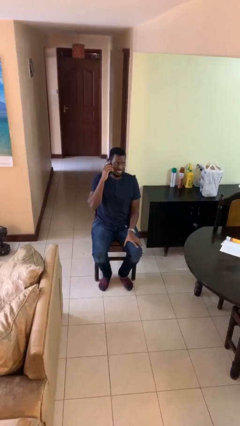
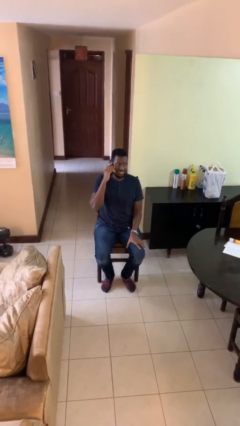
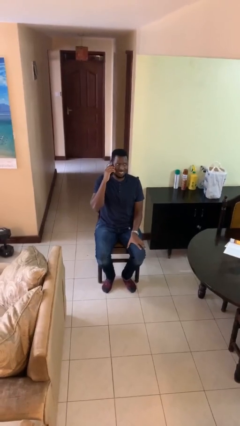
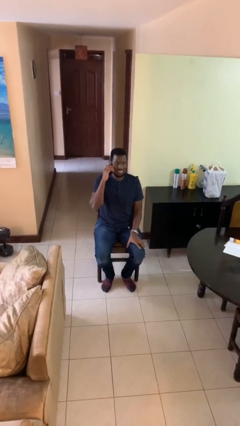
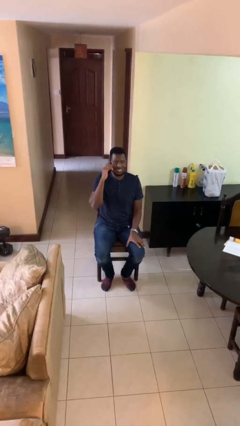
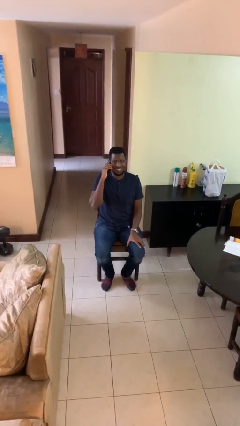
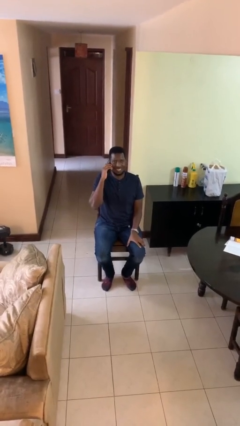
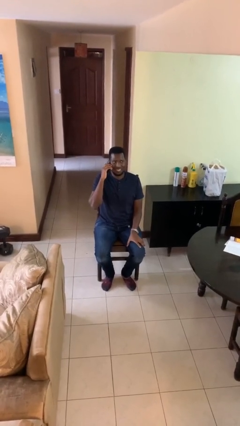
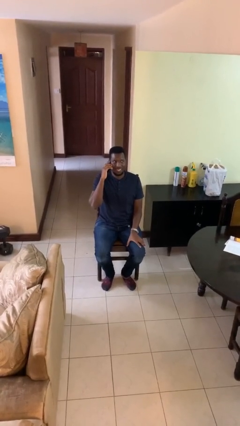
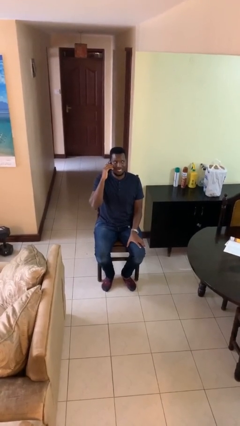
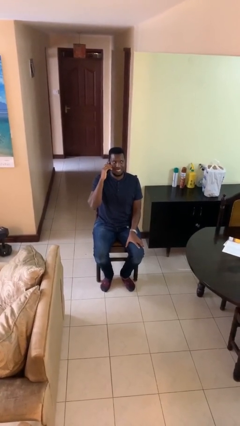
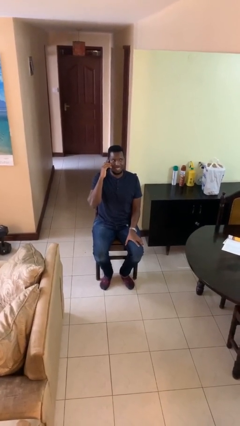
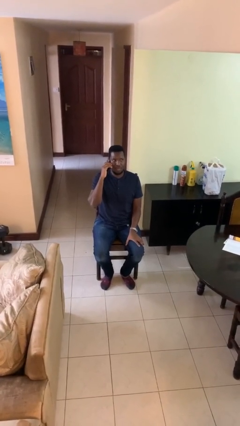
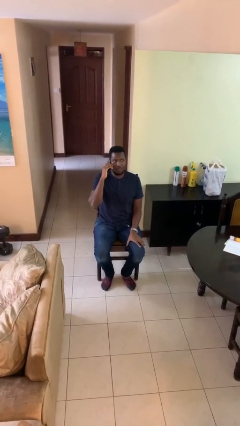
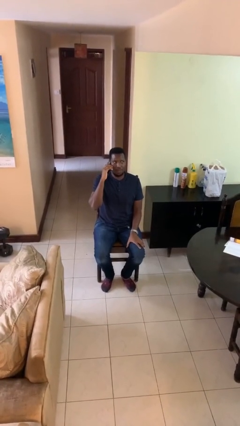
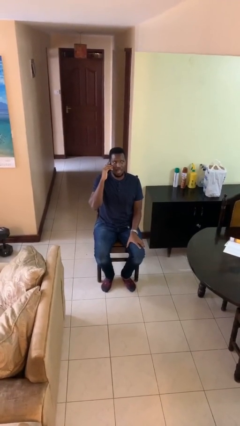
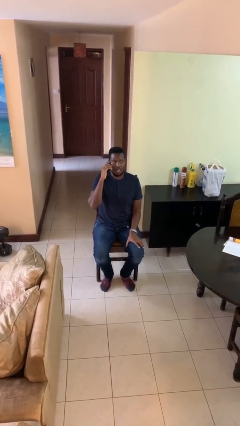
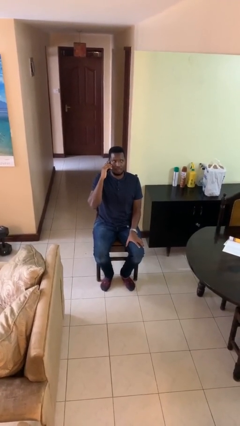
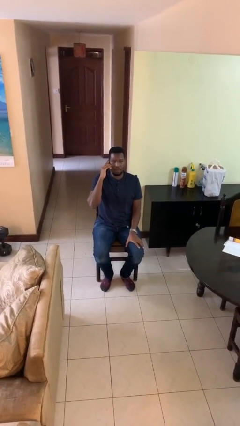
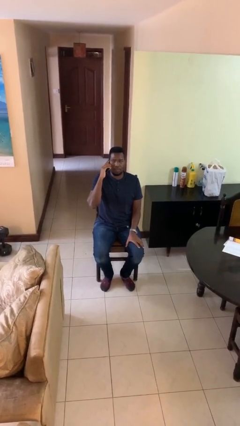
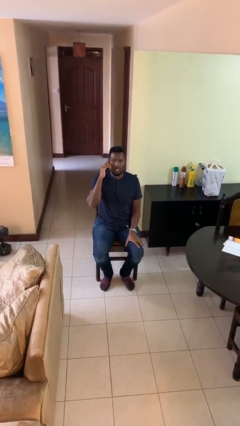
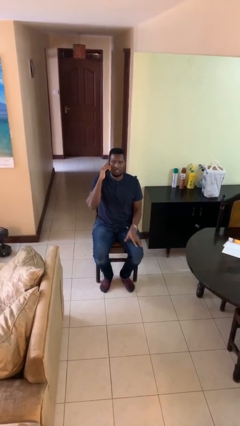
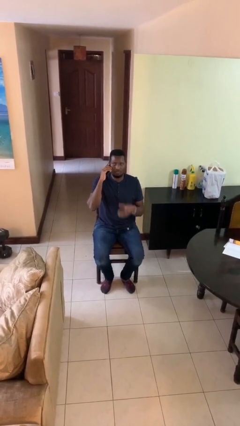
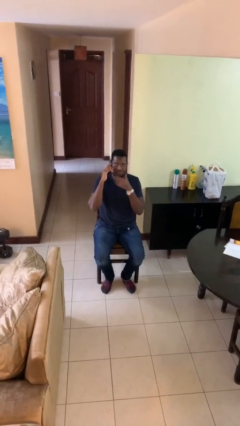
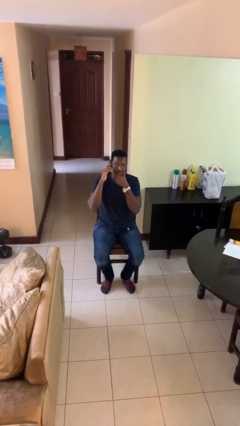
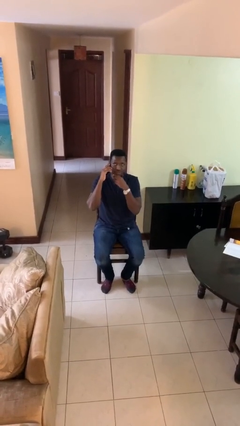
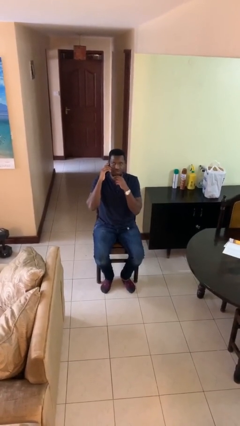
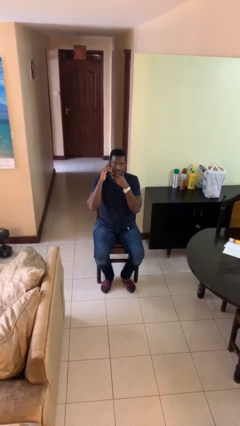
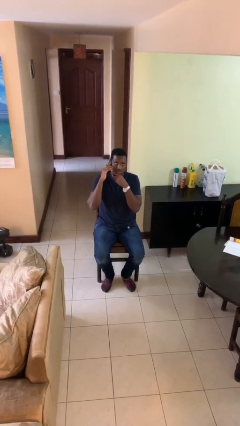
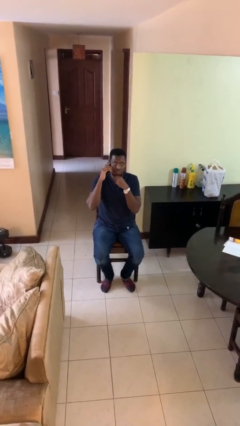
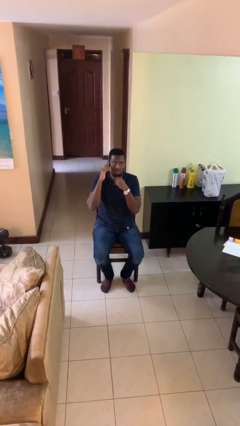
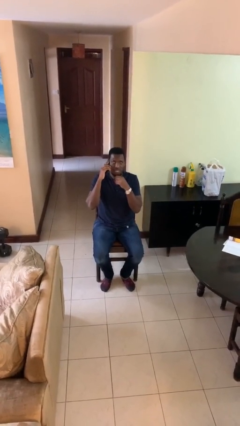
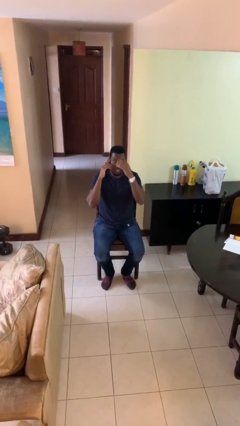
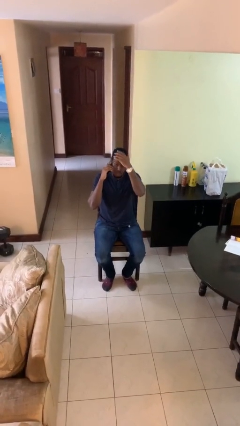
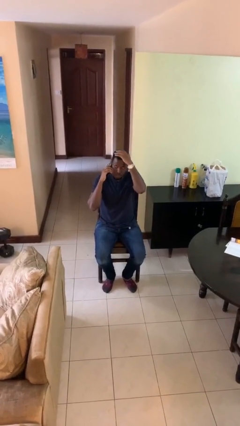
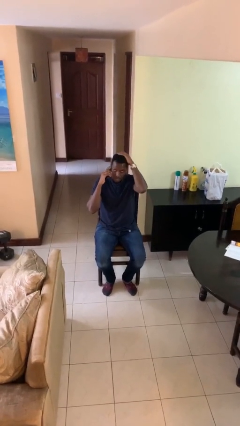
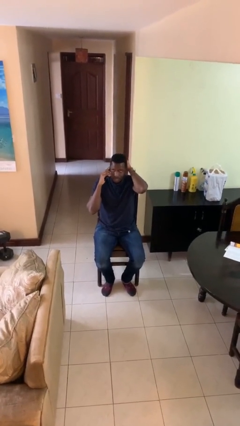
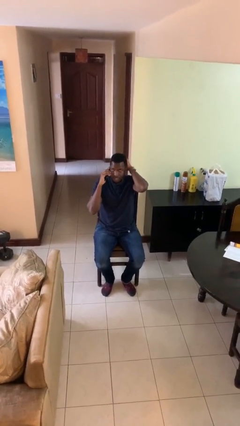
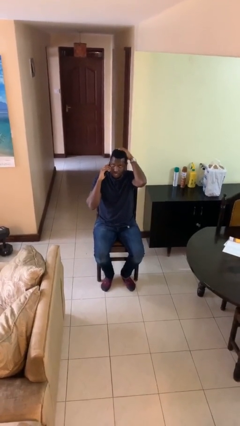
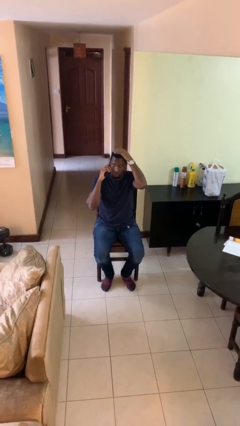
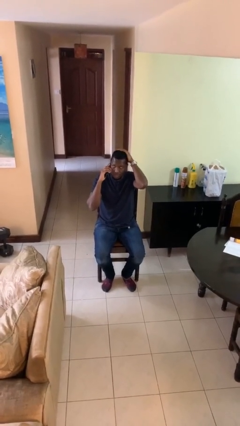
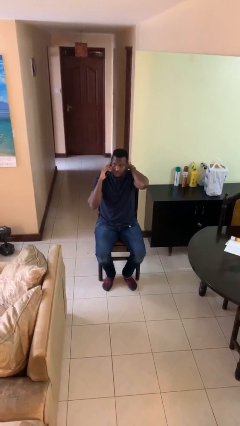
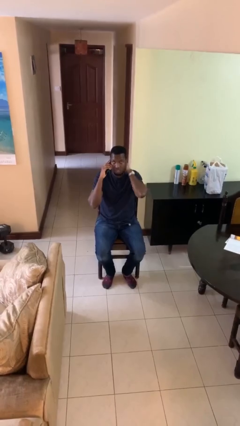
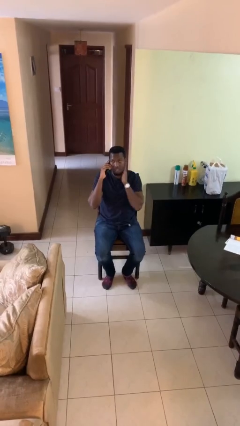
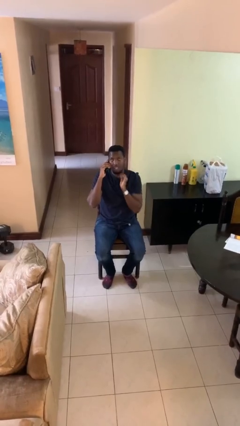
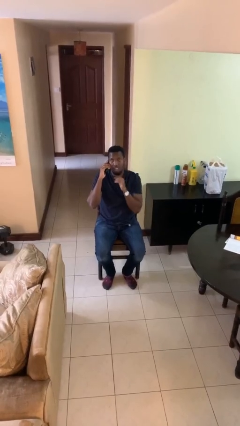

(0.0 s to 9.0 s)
person talks on phone

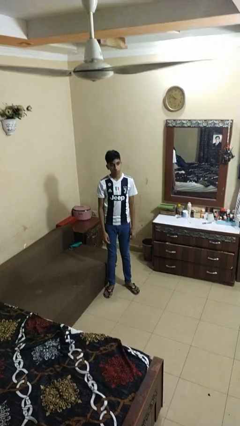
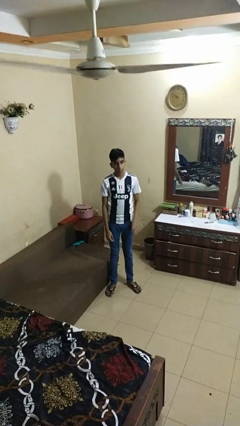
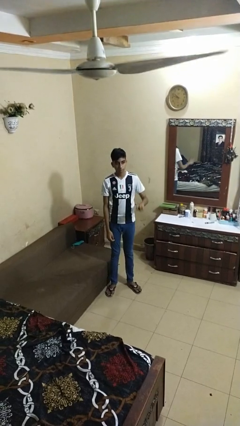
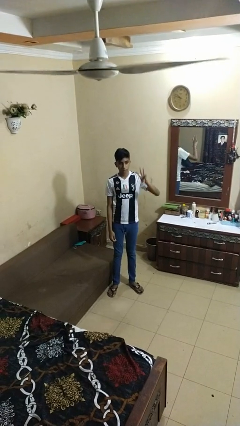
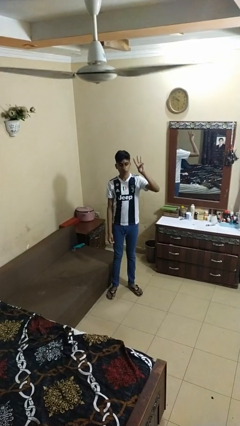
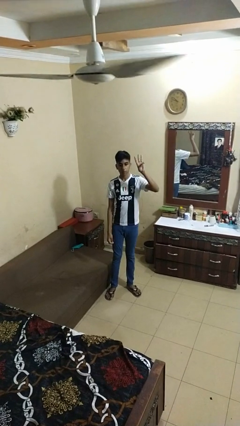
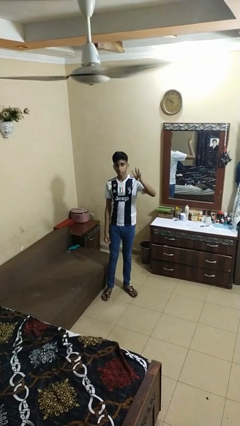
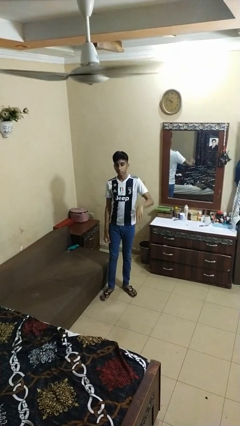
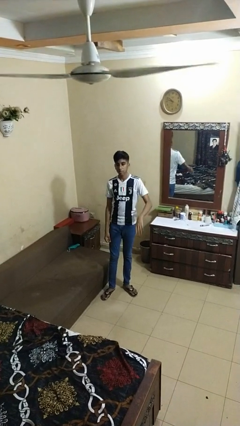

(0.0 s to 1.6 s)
person gestures number three

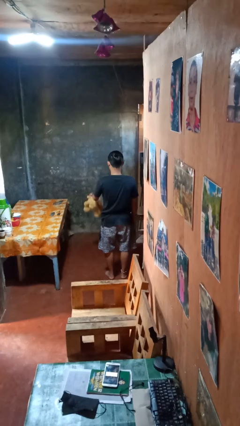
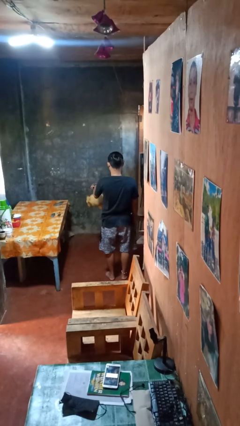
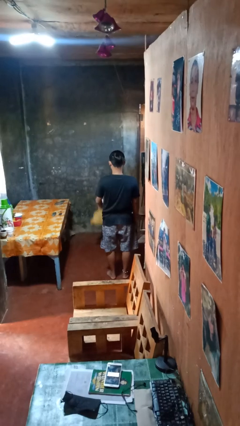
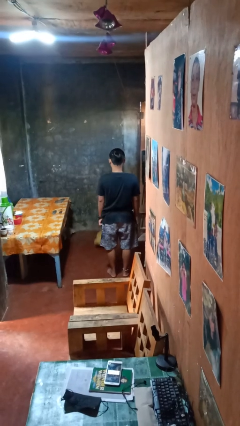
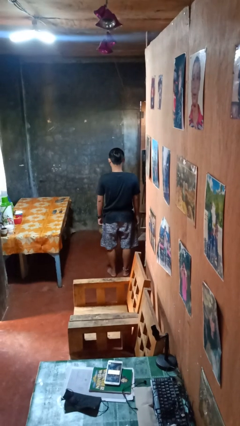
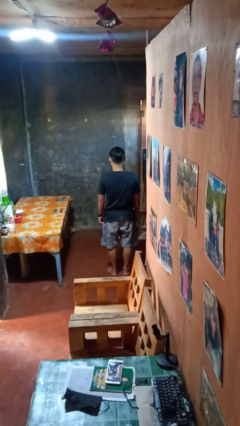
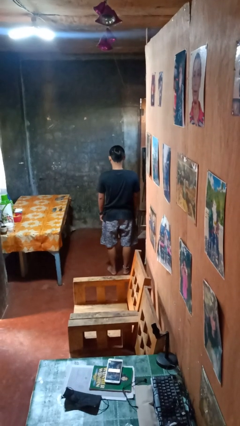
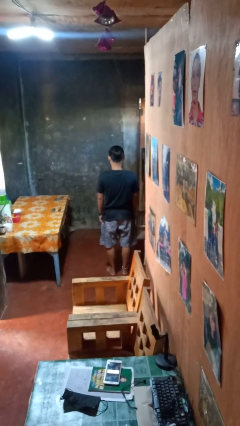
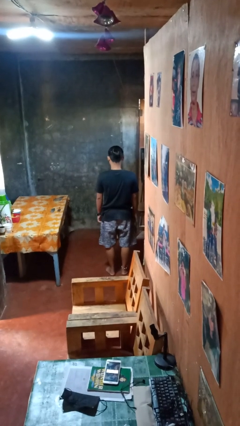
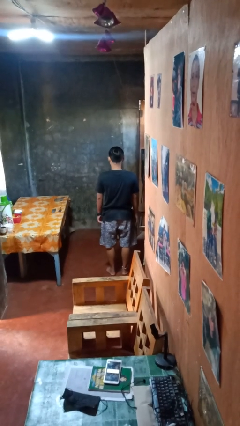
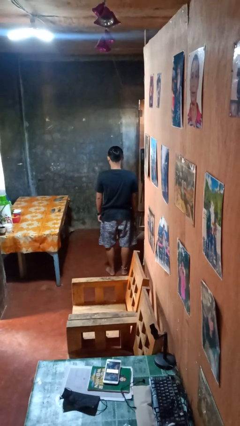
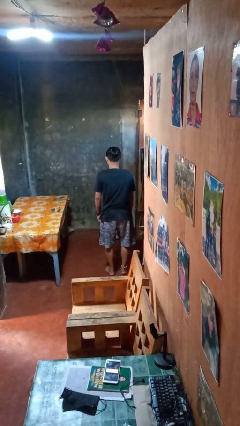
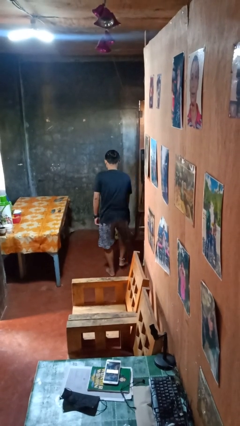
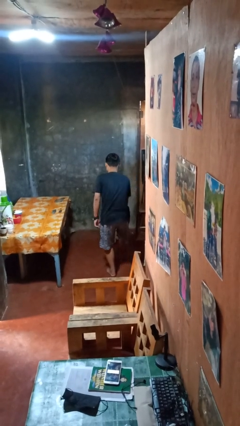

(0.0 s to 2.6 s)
person throws object to ground

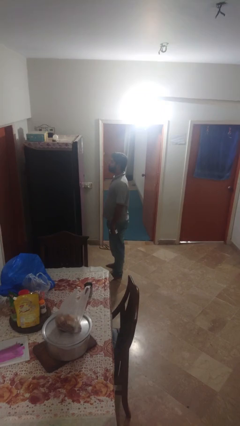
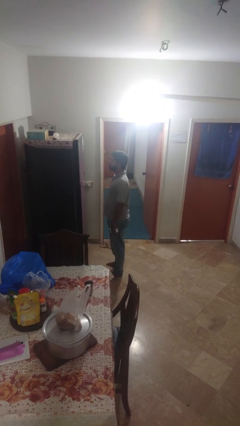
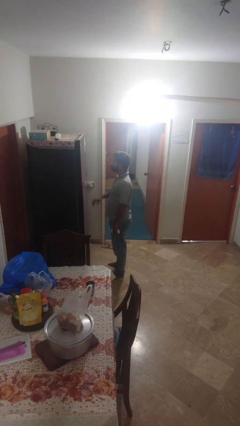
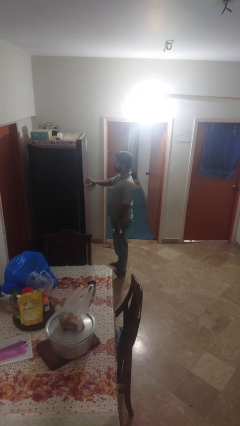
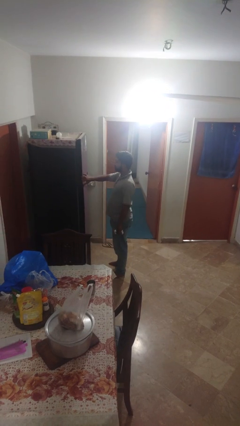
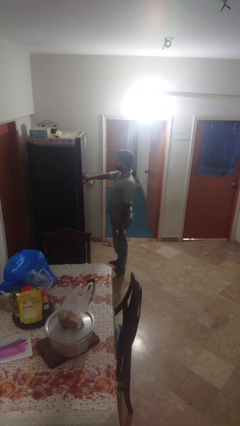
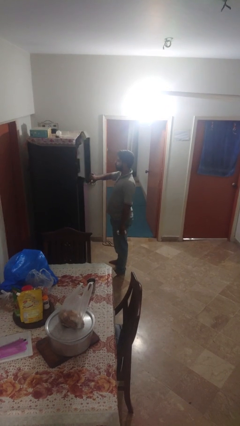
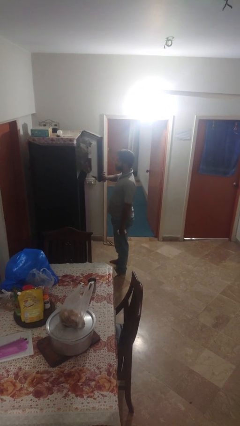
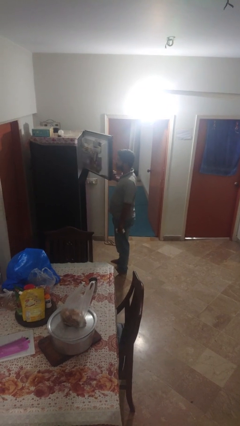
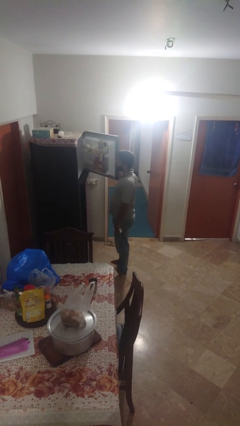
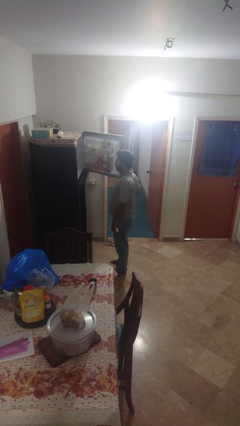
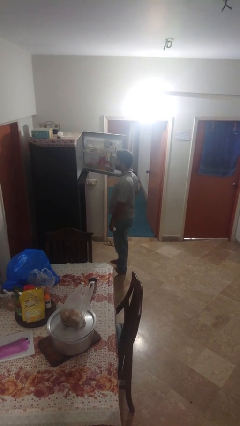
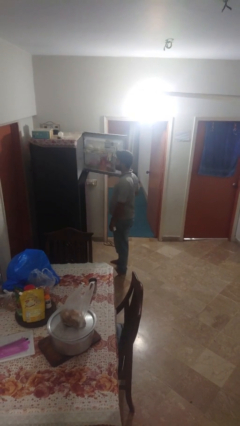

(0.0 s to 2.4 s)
person opens refrigerator

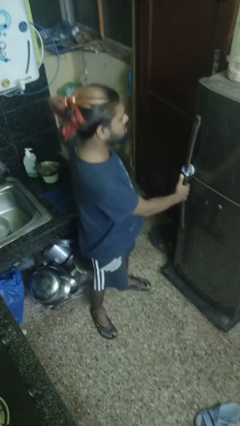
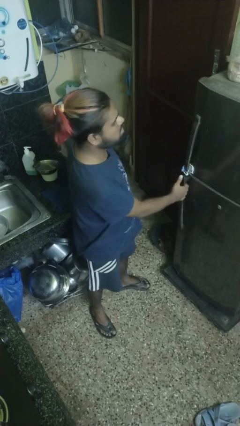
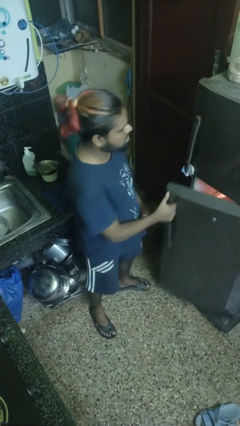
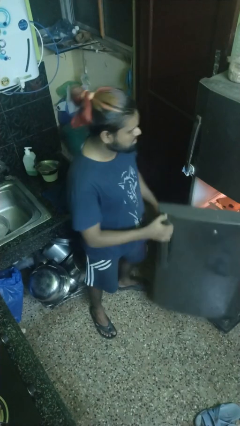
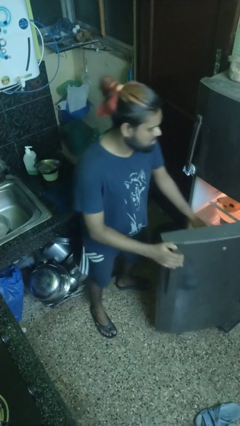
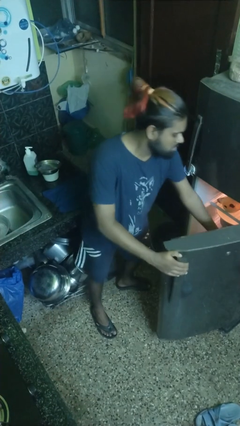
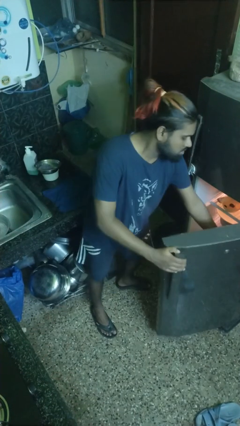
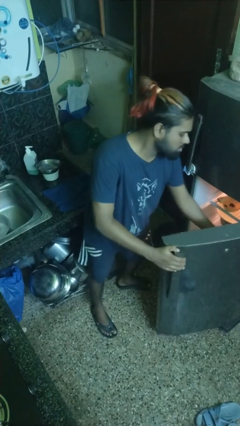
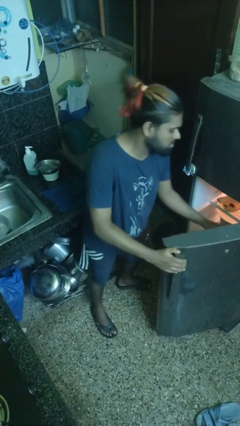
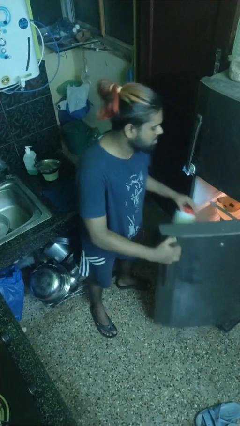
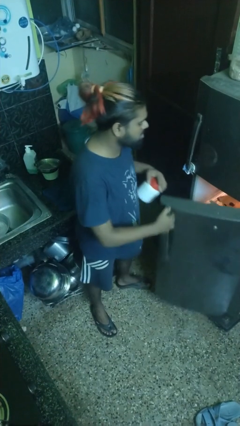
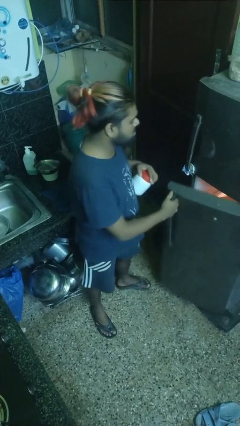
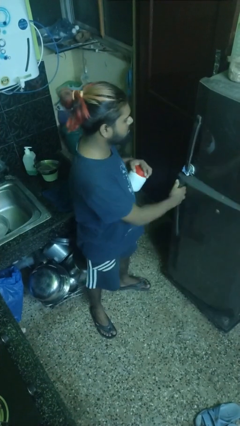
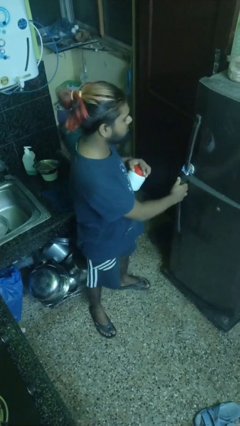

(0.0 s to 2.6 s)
person takes object from refrigerator
